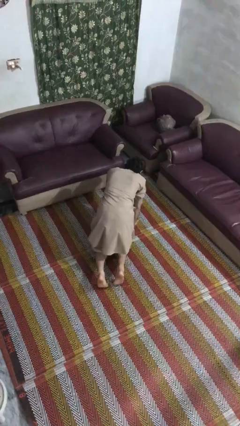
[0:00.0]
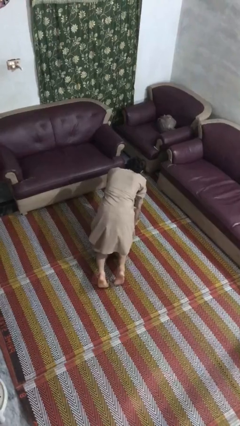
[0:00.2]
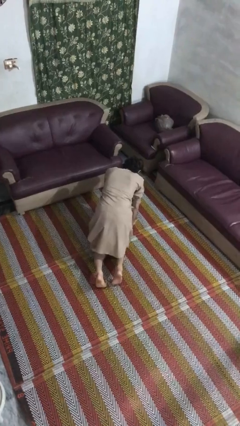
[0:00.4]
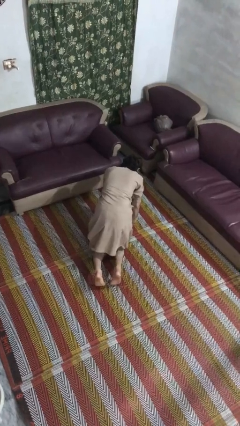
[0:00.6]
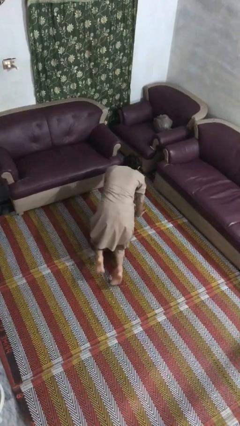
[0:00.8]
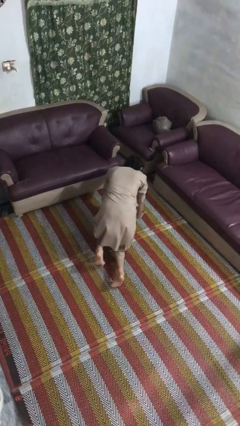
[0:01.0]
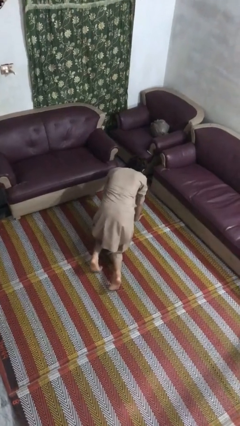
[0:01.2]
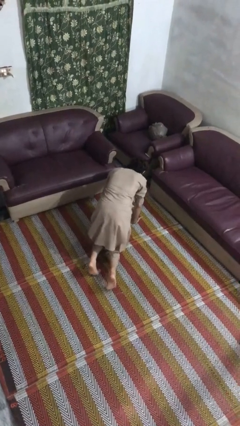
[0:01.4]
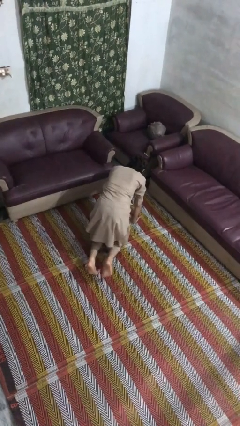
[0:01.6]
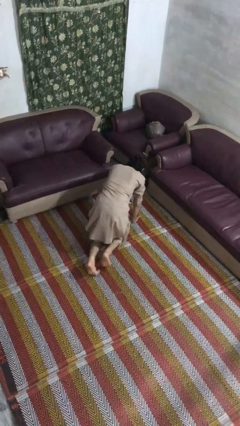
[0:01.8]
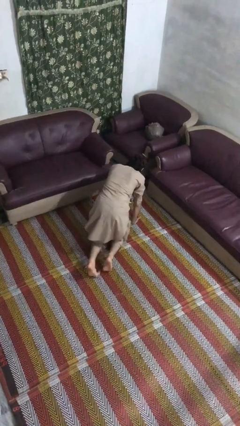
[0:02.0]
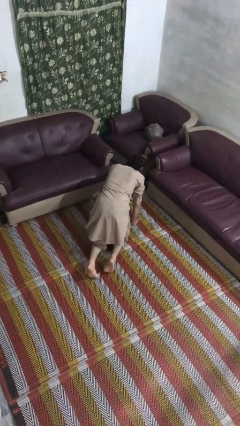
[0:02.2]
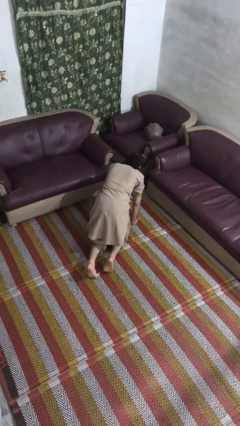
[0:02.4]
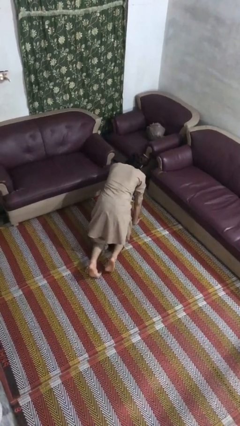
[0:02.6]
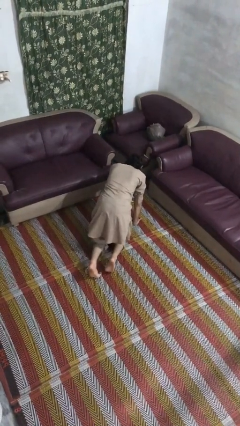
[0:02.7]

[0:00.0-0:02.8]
person crawls

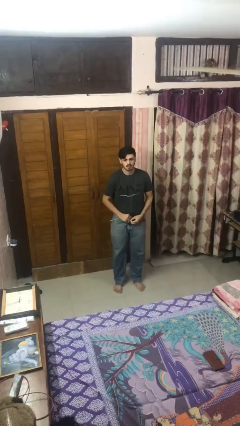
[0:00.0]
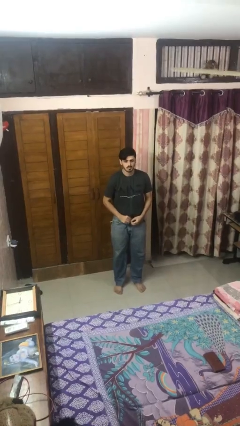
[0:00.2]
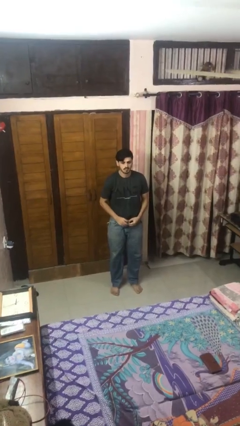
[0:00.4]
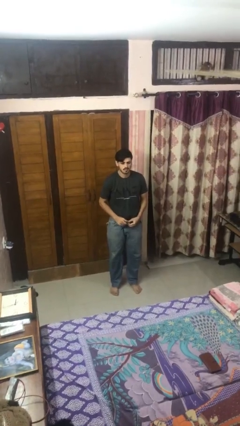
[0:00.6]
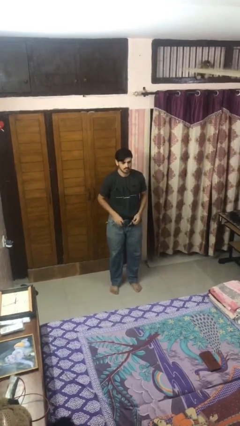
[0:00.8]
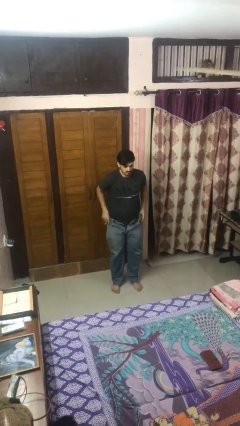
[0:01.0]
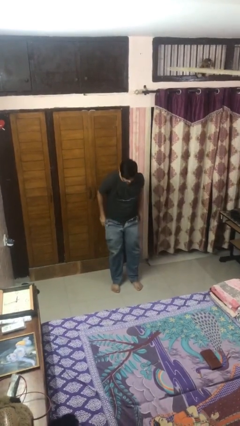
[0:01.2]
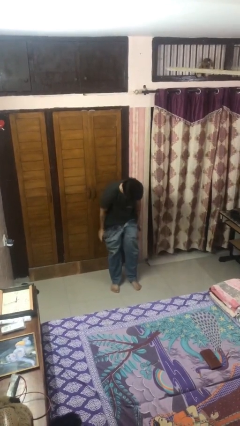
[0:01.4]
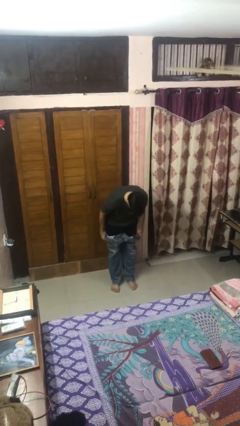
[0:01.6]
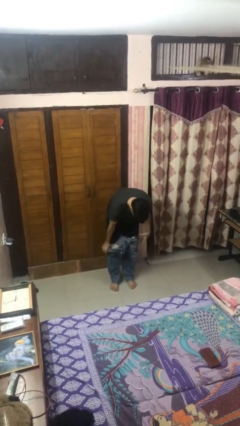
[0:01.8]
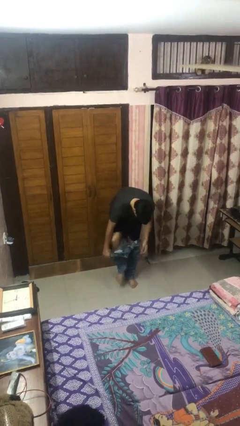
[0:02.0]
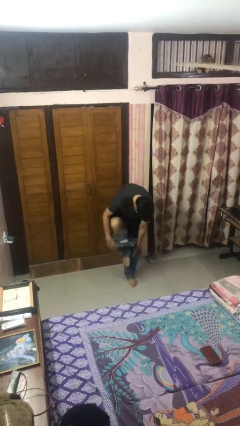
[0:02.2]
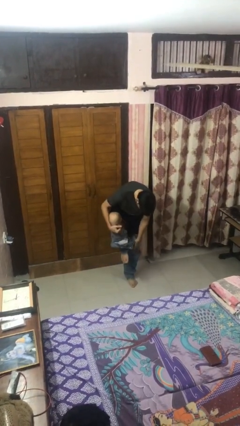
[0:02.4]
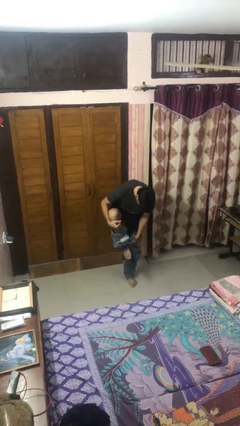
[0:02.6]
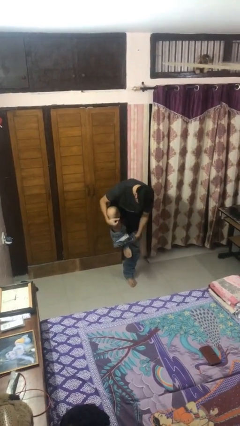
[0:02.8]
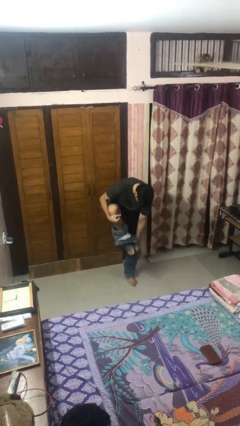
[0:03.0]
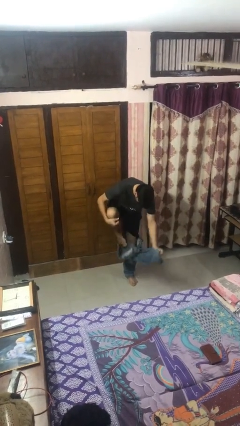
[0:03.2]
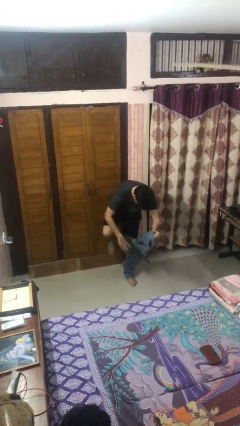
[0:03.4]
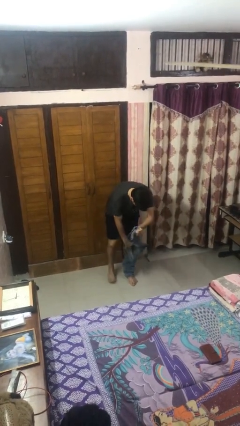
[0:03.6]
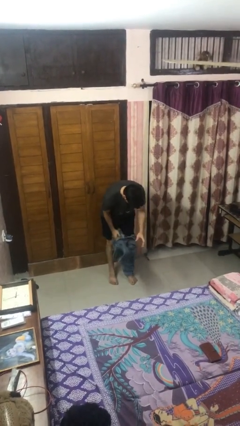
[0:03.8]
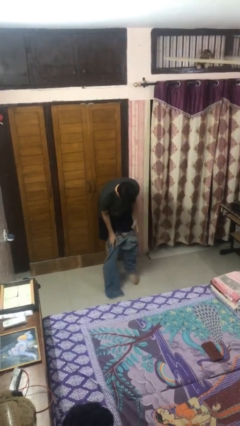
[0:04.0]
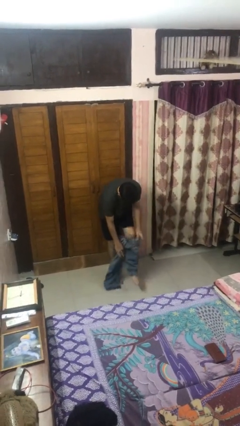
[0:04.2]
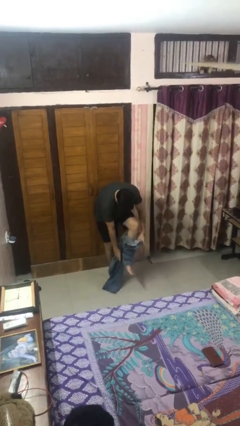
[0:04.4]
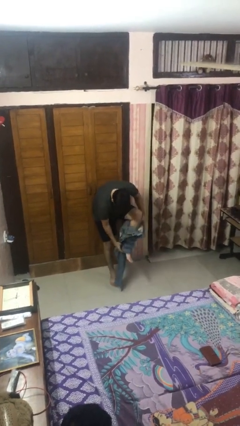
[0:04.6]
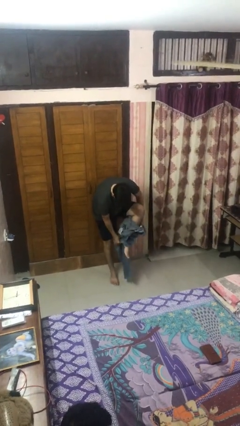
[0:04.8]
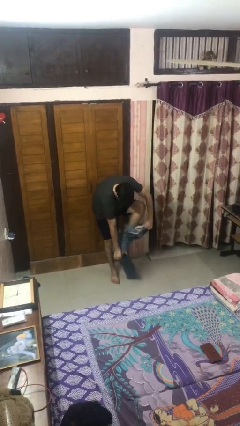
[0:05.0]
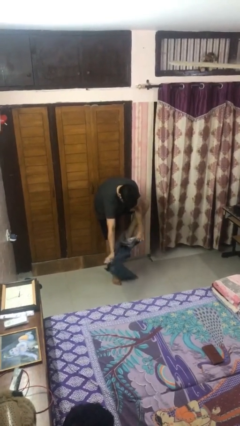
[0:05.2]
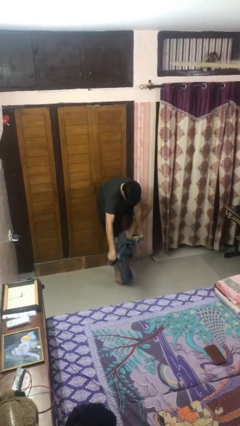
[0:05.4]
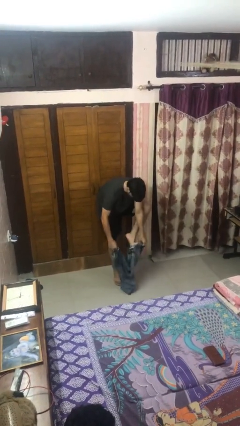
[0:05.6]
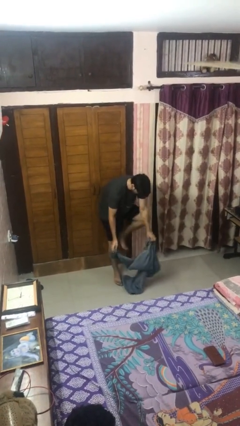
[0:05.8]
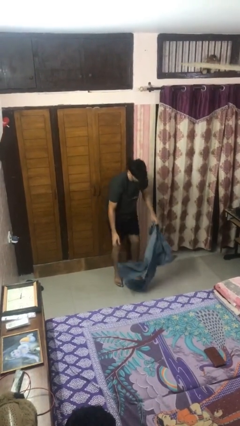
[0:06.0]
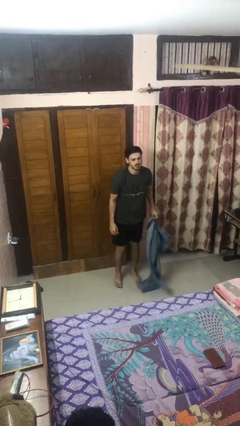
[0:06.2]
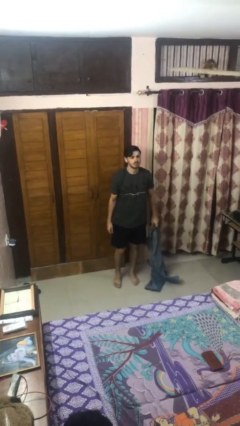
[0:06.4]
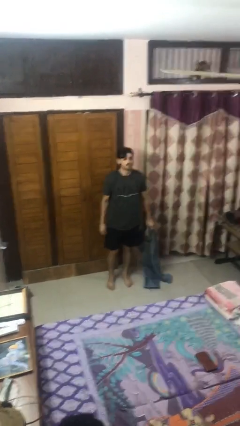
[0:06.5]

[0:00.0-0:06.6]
person takes off pants

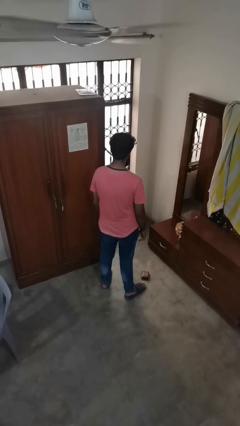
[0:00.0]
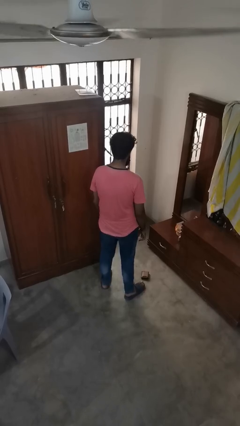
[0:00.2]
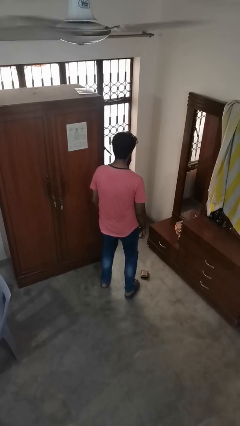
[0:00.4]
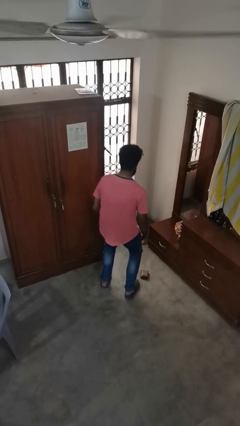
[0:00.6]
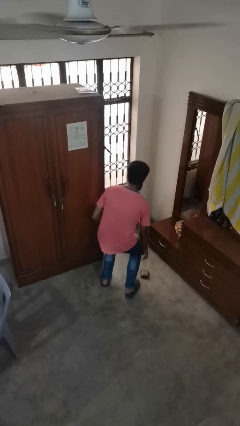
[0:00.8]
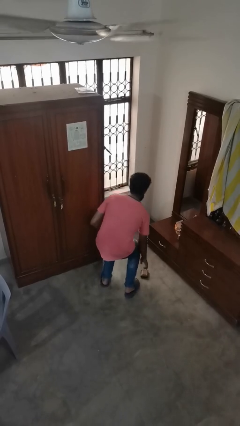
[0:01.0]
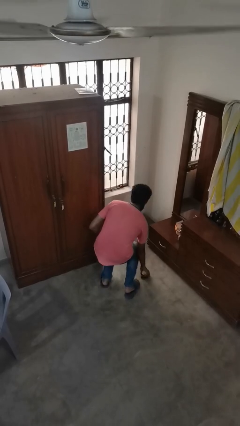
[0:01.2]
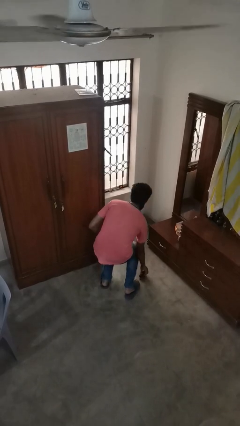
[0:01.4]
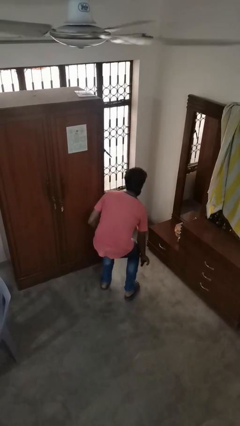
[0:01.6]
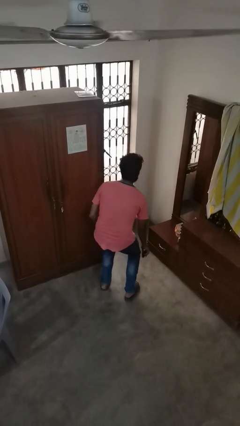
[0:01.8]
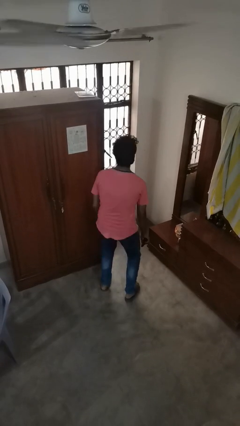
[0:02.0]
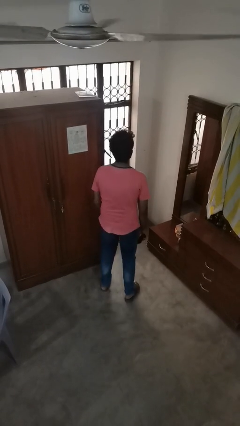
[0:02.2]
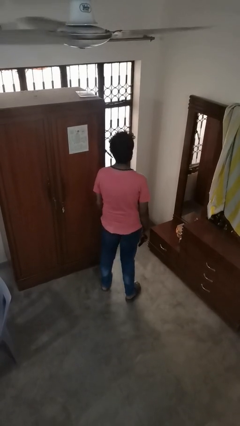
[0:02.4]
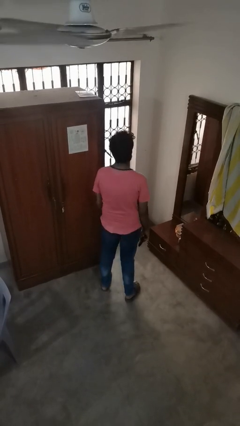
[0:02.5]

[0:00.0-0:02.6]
person picks up object from floor

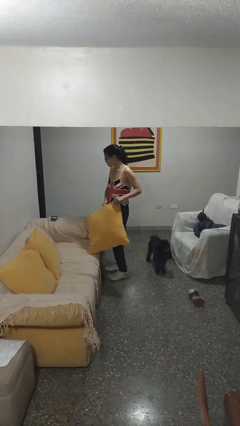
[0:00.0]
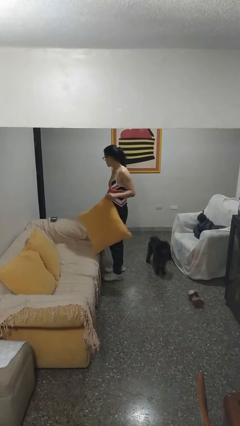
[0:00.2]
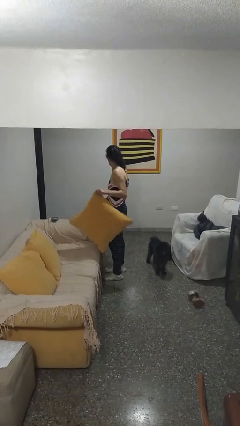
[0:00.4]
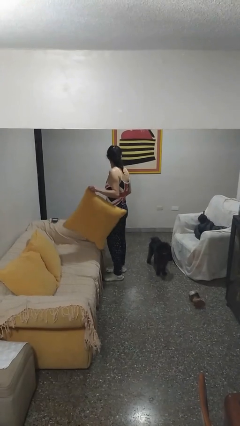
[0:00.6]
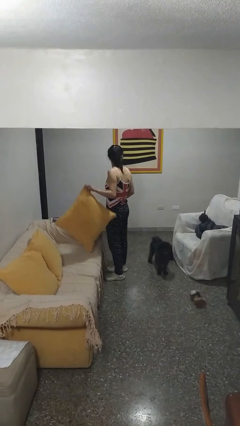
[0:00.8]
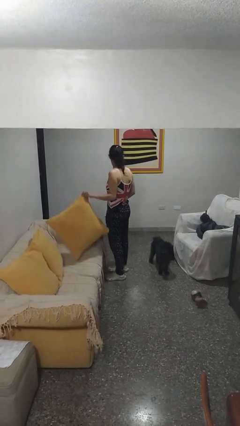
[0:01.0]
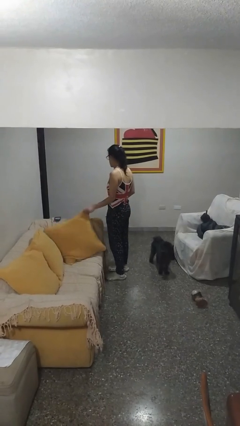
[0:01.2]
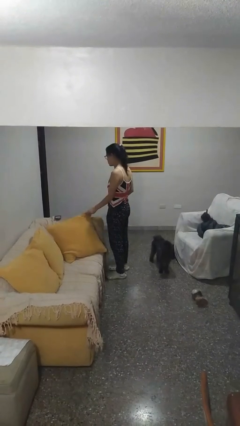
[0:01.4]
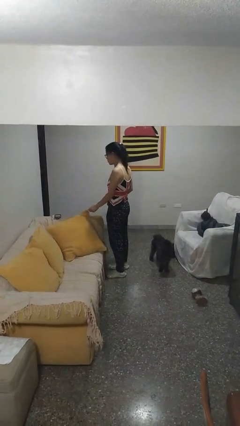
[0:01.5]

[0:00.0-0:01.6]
person puts down object on couch

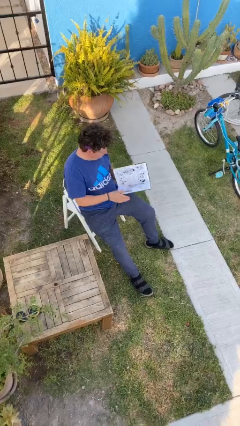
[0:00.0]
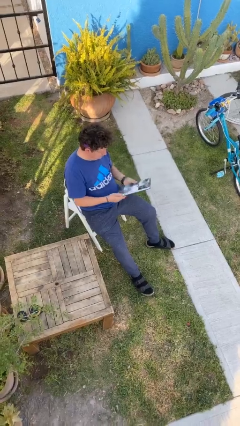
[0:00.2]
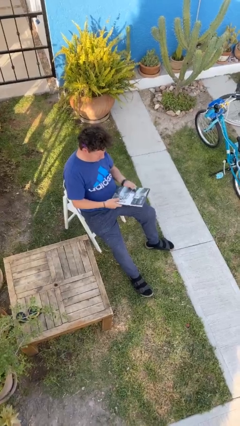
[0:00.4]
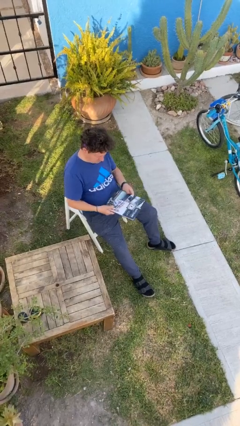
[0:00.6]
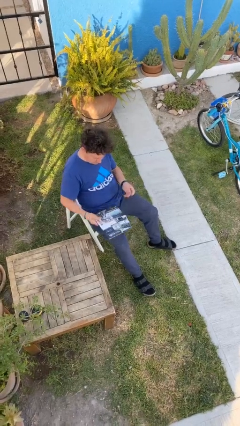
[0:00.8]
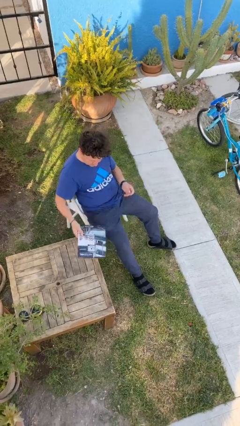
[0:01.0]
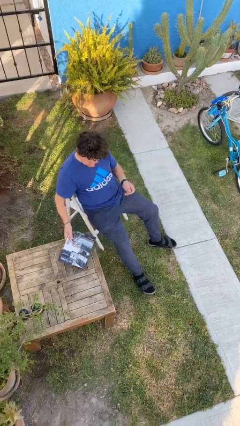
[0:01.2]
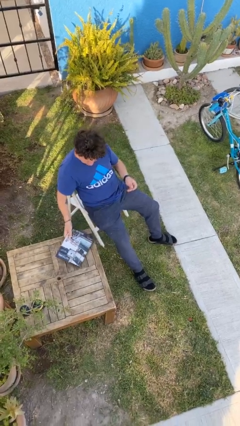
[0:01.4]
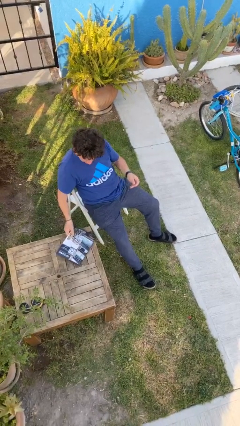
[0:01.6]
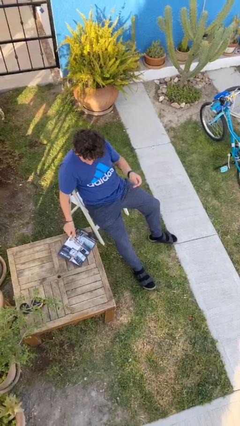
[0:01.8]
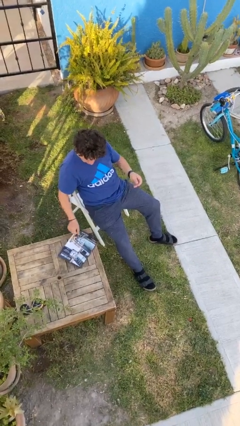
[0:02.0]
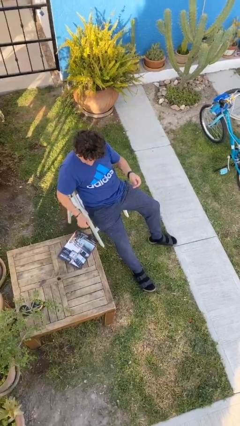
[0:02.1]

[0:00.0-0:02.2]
person puts down object on table

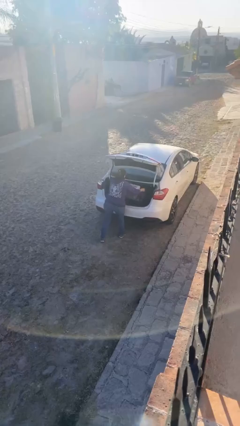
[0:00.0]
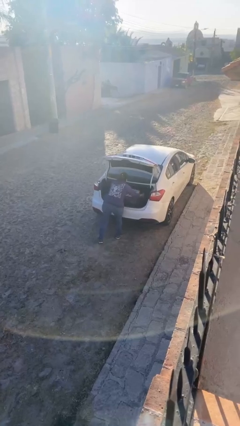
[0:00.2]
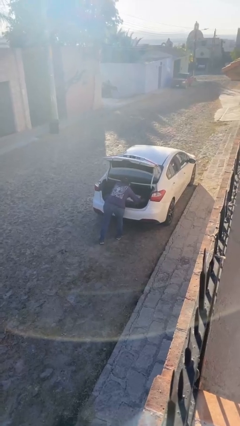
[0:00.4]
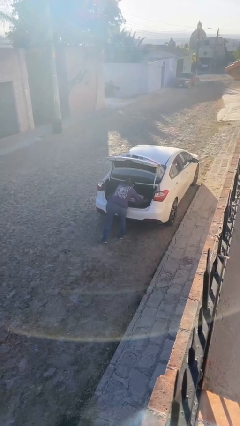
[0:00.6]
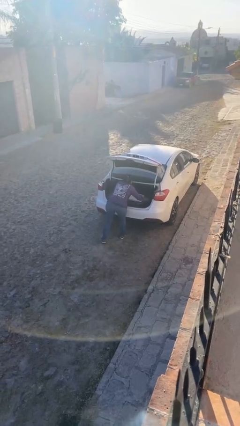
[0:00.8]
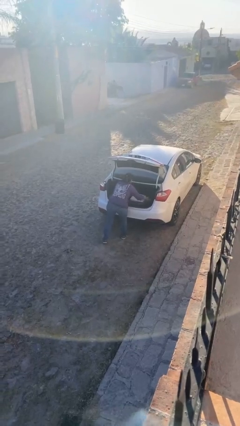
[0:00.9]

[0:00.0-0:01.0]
person loads car

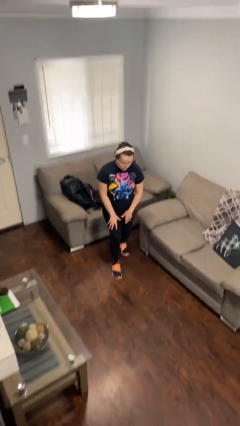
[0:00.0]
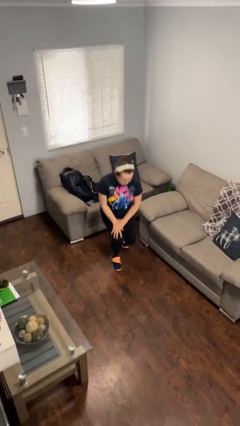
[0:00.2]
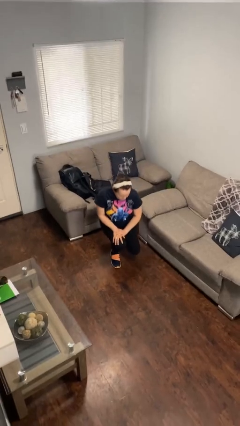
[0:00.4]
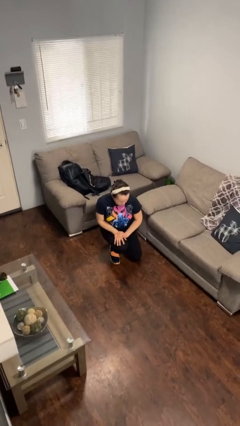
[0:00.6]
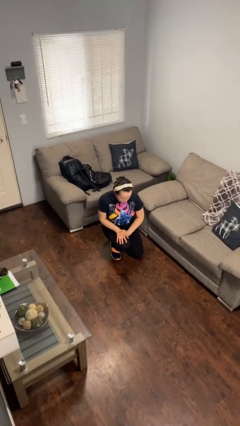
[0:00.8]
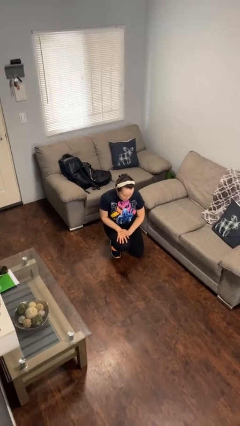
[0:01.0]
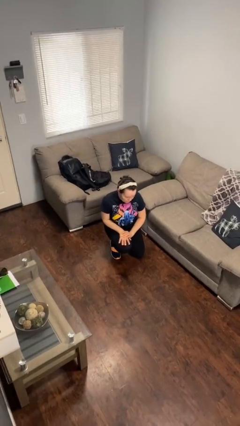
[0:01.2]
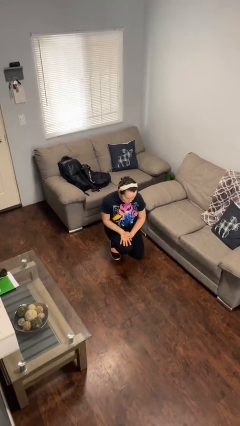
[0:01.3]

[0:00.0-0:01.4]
person kneels
